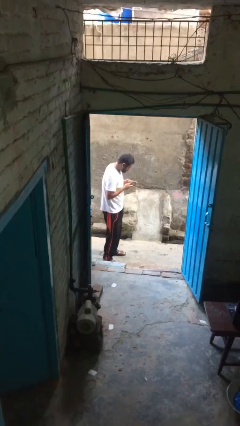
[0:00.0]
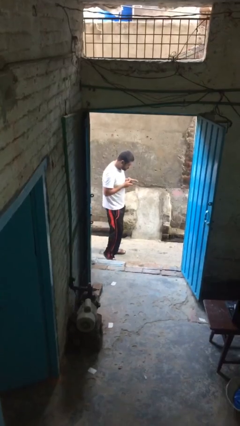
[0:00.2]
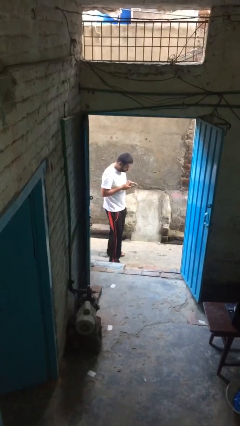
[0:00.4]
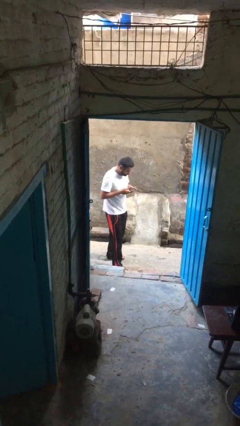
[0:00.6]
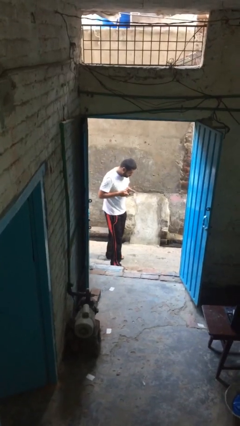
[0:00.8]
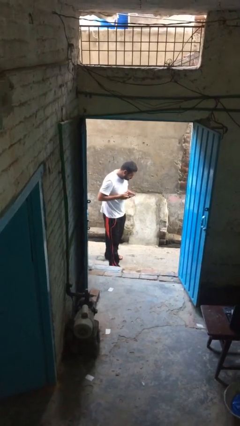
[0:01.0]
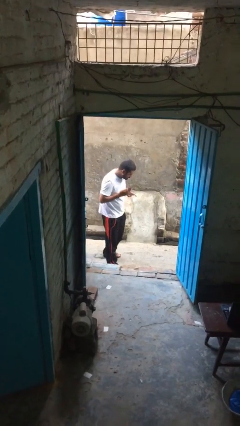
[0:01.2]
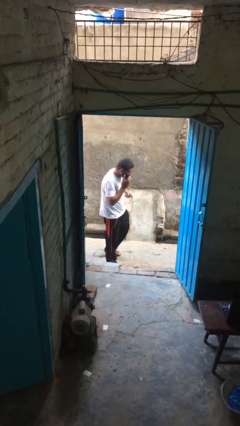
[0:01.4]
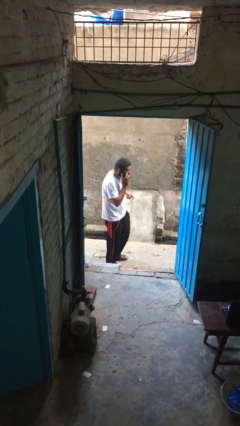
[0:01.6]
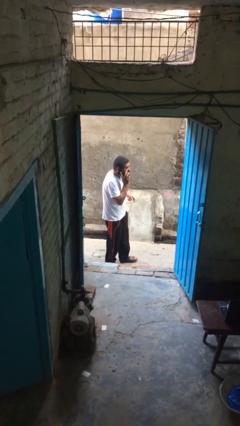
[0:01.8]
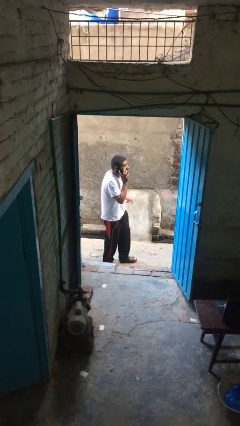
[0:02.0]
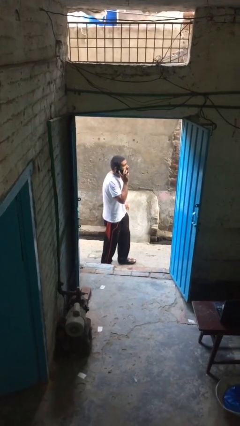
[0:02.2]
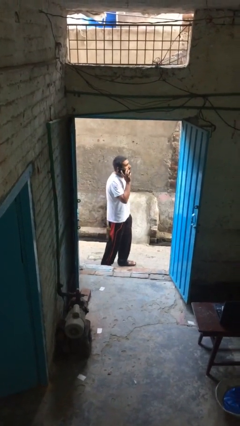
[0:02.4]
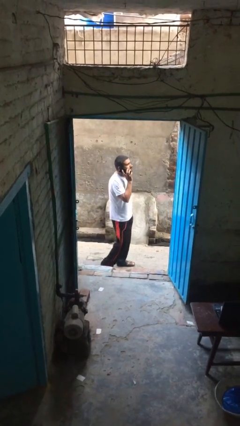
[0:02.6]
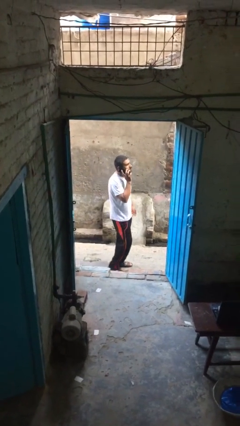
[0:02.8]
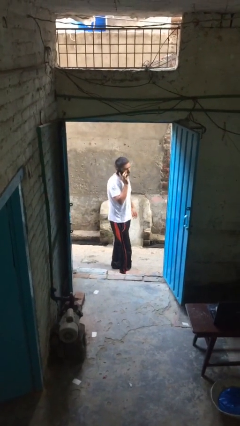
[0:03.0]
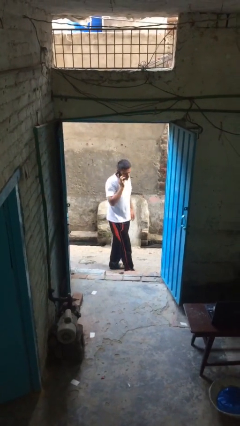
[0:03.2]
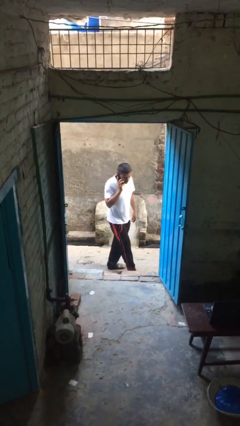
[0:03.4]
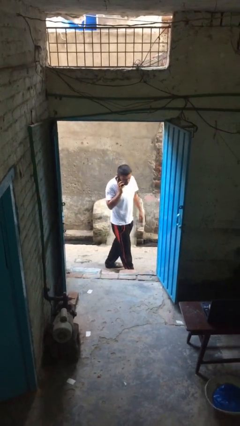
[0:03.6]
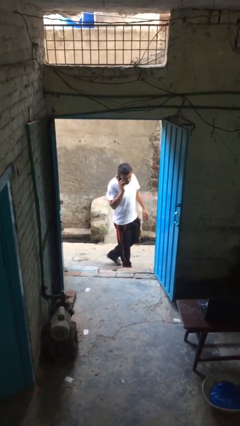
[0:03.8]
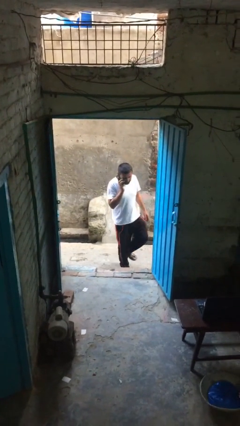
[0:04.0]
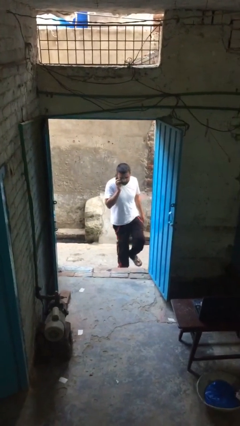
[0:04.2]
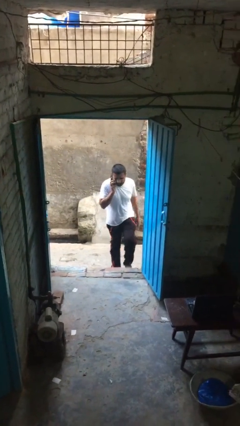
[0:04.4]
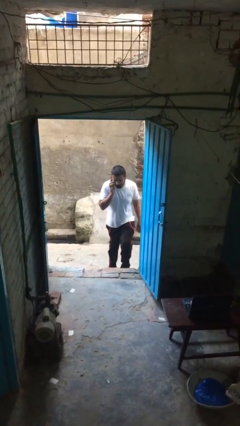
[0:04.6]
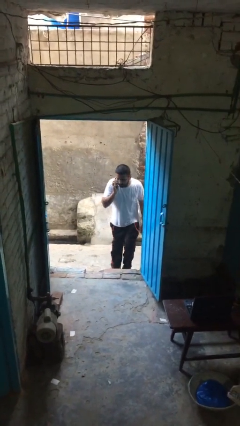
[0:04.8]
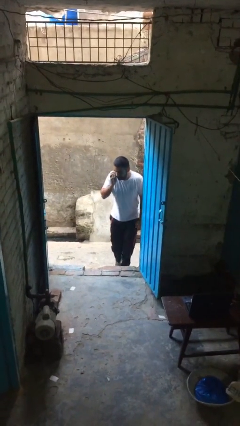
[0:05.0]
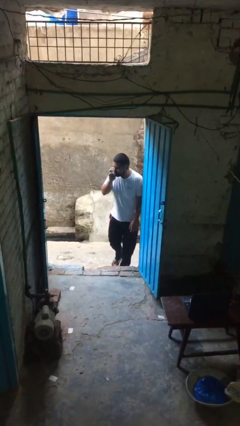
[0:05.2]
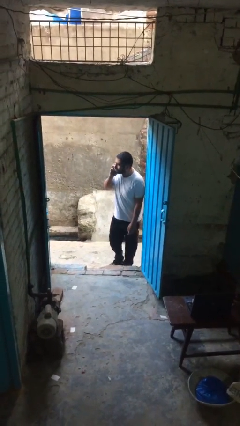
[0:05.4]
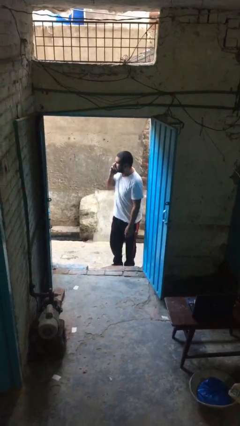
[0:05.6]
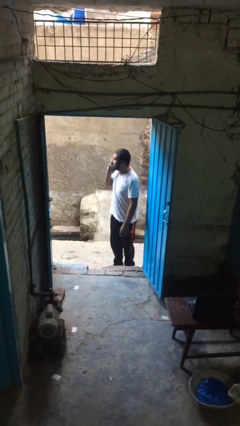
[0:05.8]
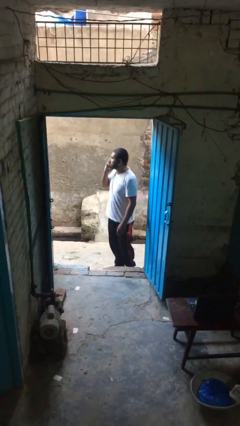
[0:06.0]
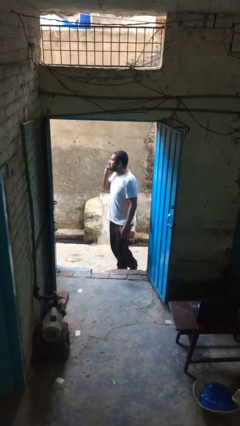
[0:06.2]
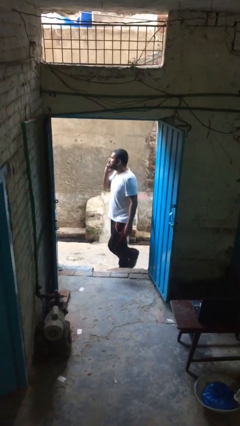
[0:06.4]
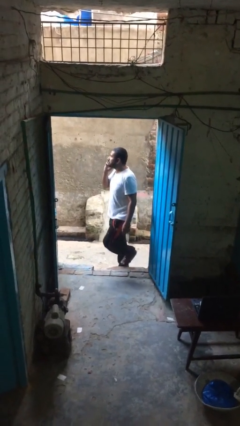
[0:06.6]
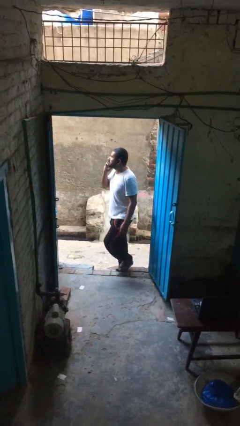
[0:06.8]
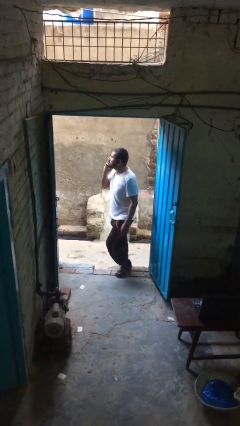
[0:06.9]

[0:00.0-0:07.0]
person talks on phone

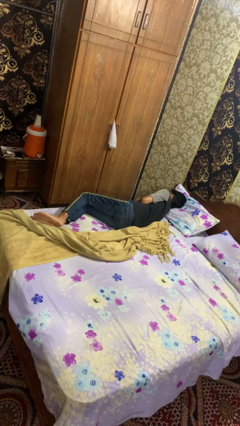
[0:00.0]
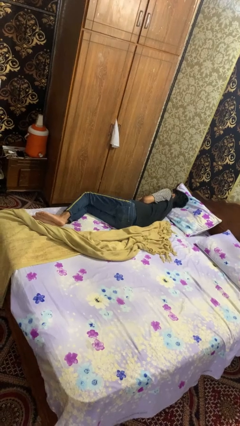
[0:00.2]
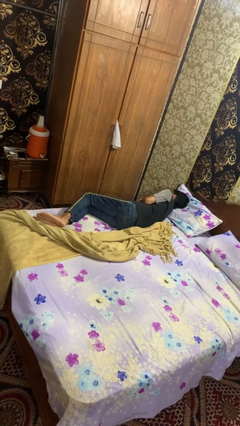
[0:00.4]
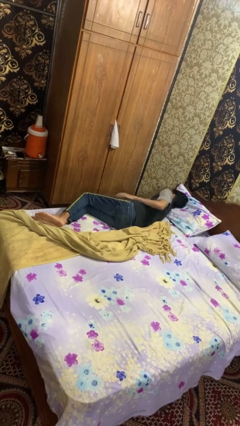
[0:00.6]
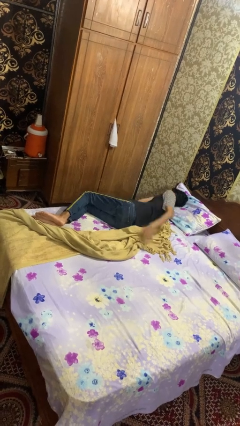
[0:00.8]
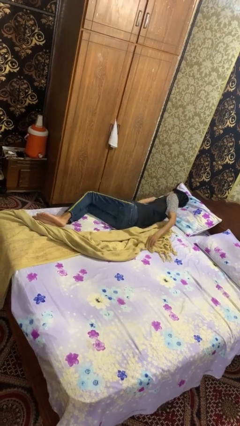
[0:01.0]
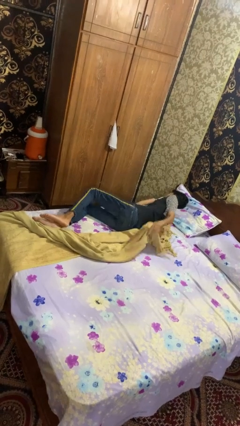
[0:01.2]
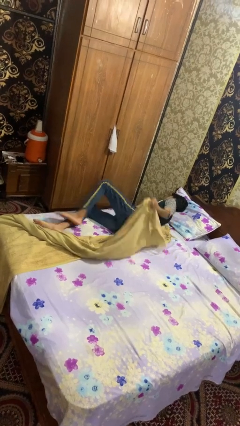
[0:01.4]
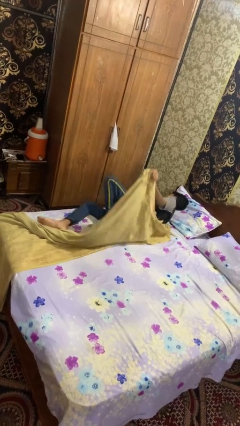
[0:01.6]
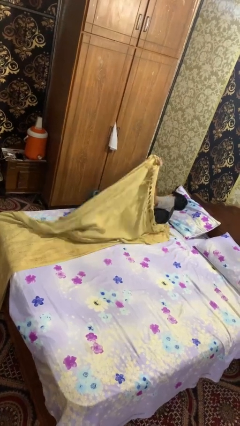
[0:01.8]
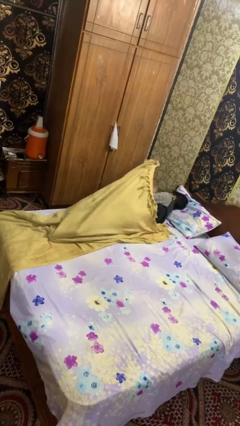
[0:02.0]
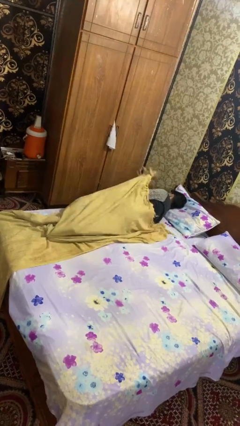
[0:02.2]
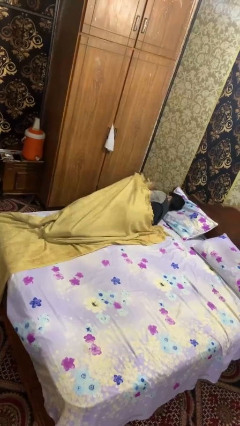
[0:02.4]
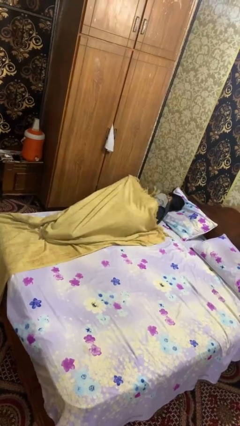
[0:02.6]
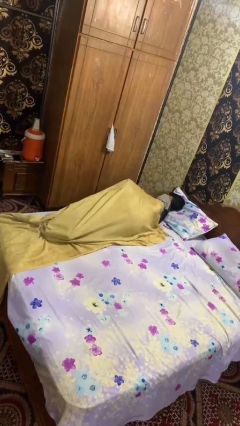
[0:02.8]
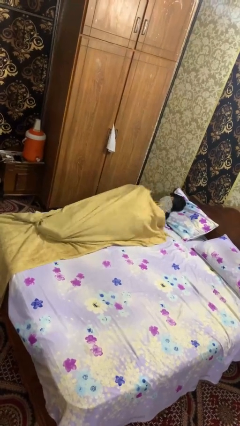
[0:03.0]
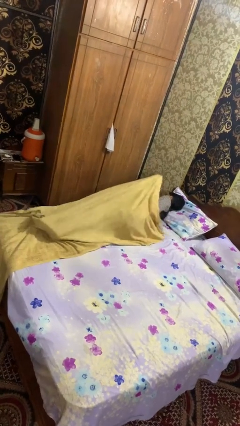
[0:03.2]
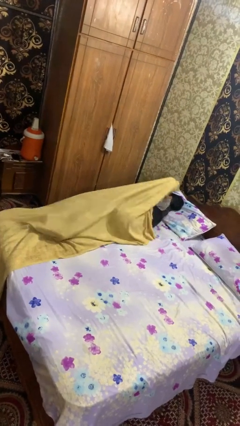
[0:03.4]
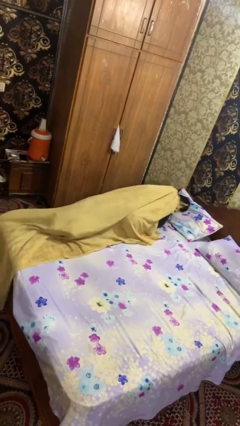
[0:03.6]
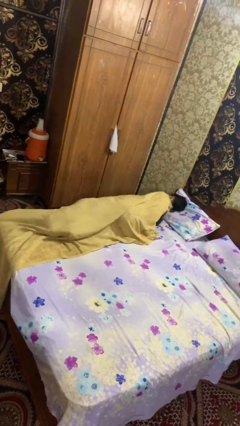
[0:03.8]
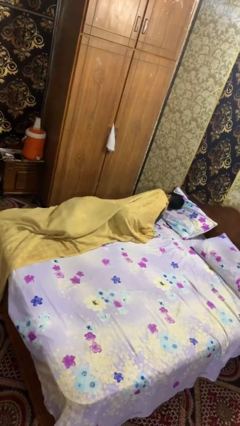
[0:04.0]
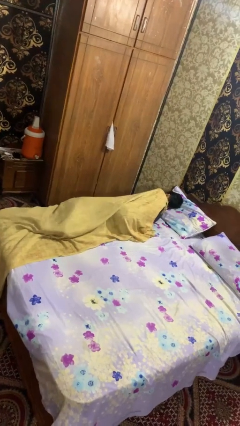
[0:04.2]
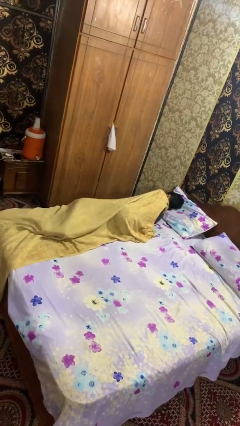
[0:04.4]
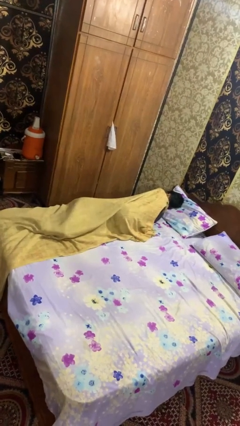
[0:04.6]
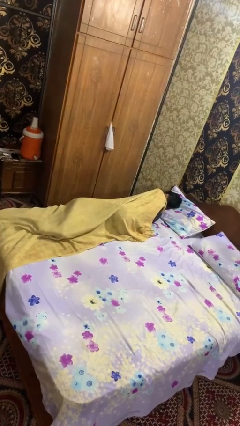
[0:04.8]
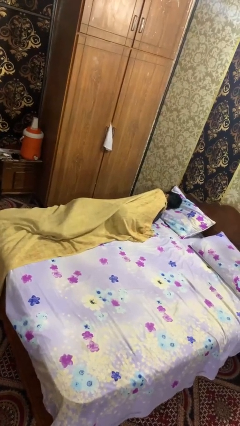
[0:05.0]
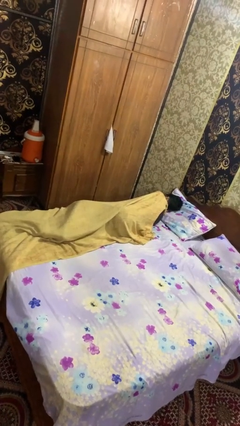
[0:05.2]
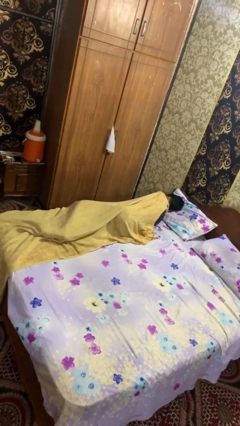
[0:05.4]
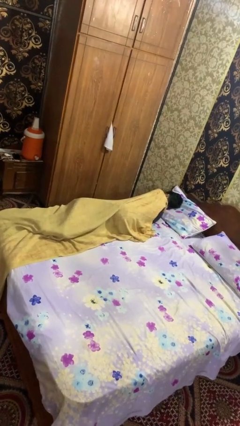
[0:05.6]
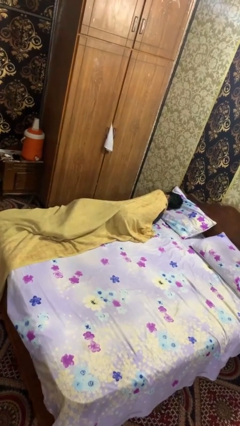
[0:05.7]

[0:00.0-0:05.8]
person covers with bedsheets

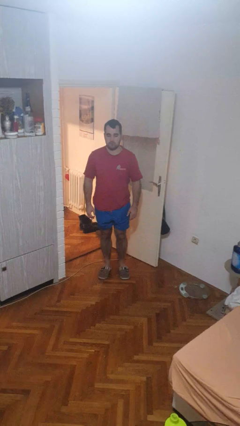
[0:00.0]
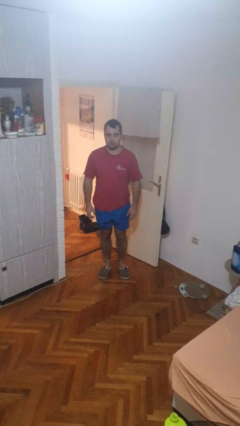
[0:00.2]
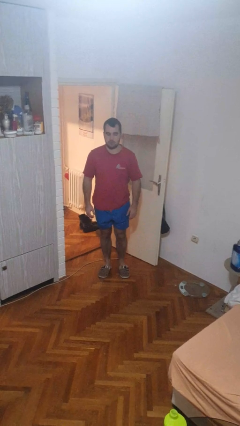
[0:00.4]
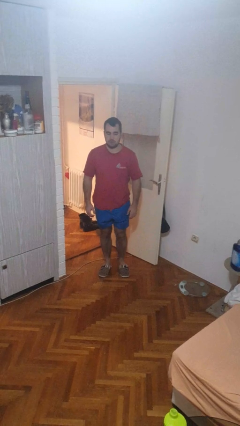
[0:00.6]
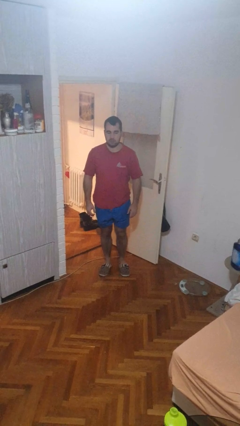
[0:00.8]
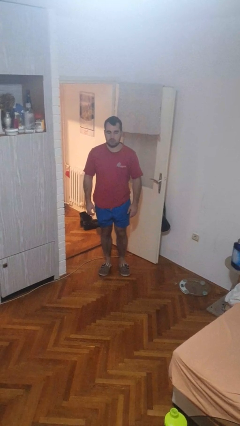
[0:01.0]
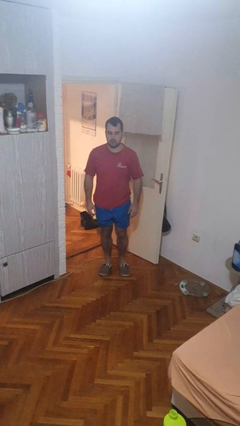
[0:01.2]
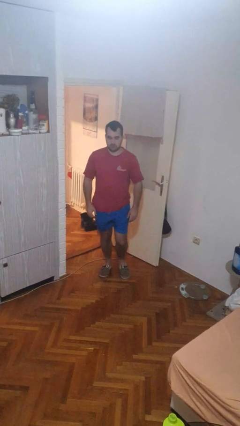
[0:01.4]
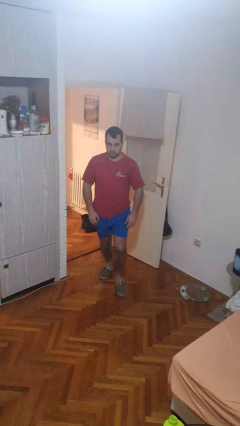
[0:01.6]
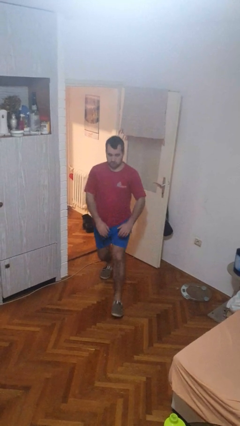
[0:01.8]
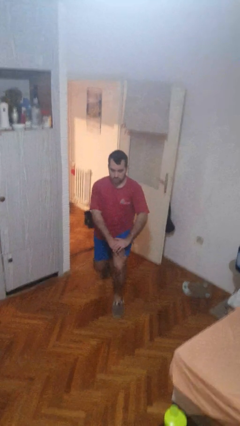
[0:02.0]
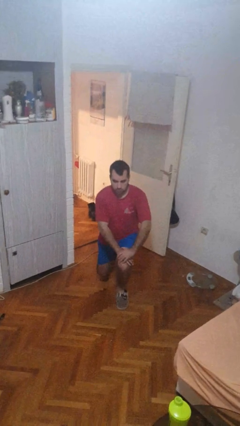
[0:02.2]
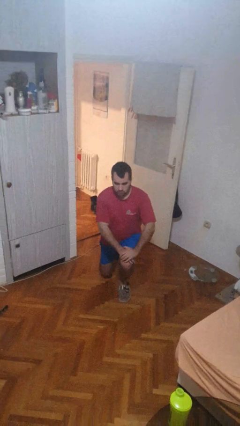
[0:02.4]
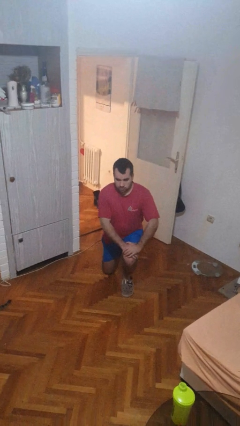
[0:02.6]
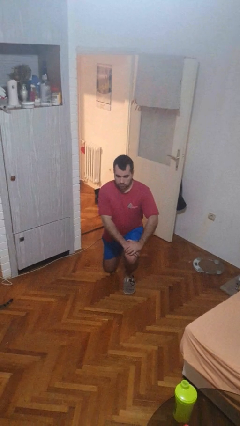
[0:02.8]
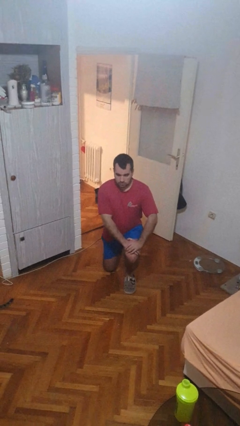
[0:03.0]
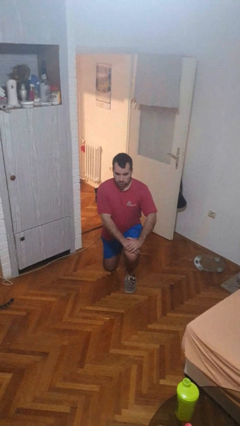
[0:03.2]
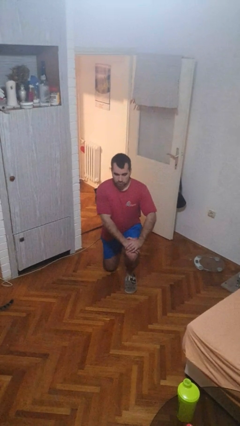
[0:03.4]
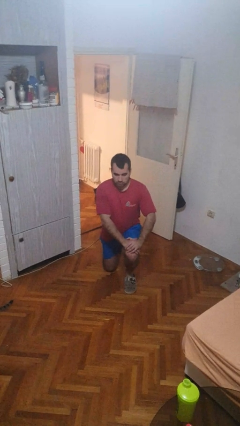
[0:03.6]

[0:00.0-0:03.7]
person kneels

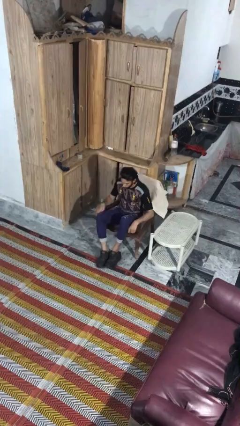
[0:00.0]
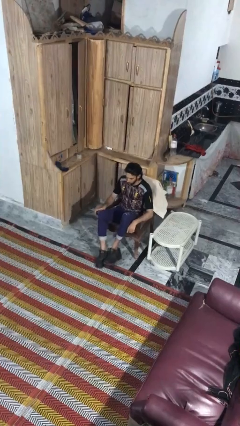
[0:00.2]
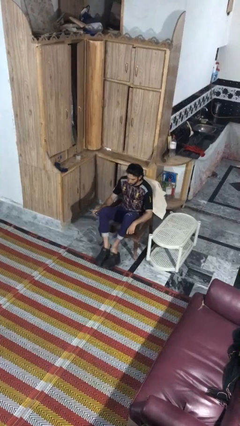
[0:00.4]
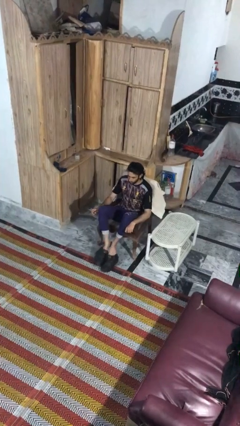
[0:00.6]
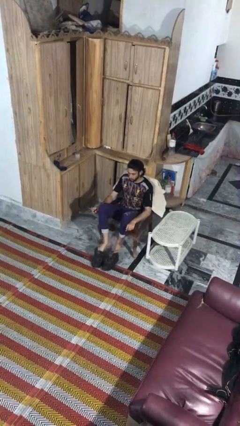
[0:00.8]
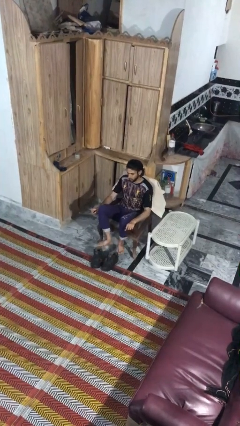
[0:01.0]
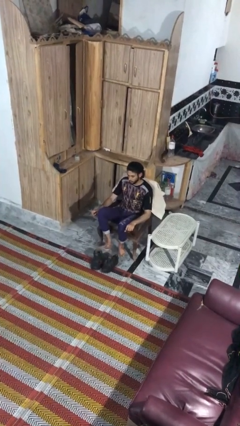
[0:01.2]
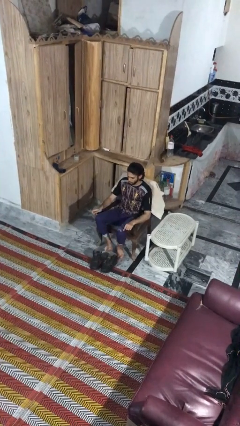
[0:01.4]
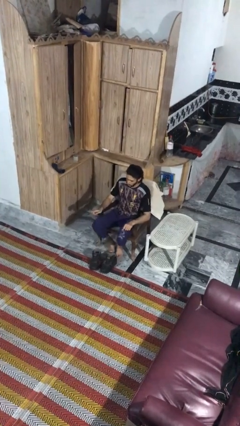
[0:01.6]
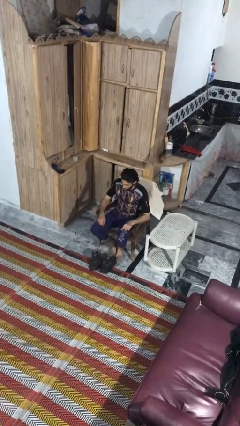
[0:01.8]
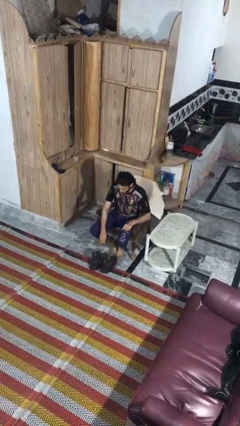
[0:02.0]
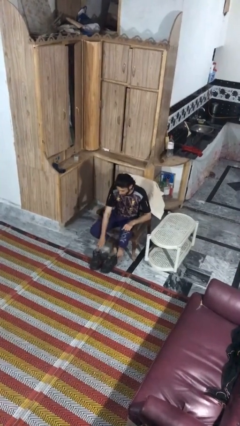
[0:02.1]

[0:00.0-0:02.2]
person takes off boots
